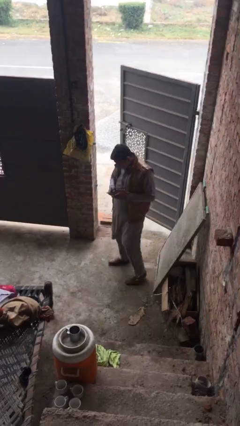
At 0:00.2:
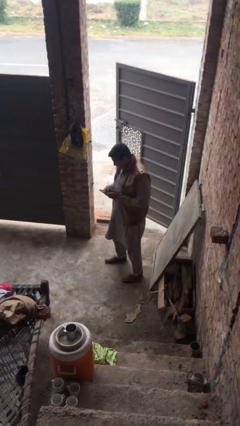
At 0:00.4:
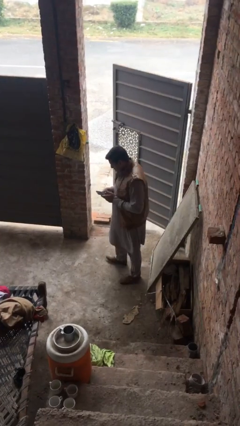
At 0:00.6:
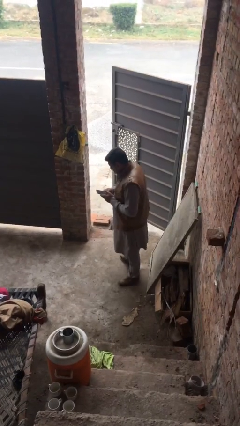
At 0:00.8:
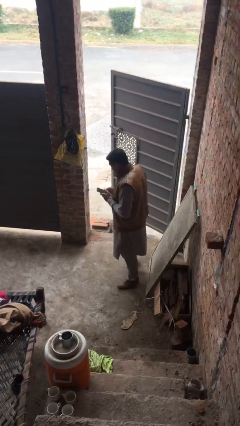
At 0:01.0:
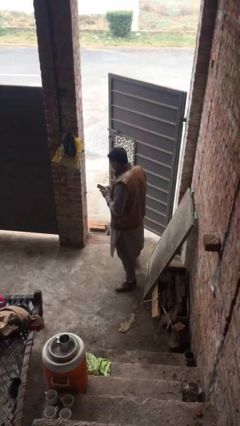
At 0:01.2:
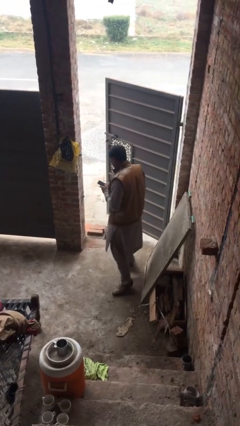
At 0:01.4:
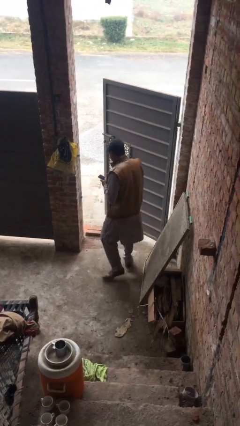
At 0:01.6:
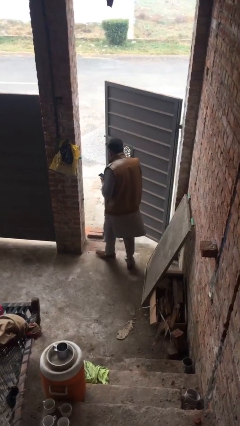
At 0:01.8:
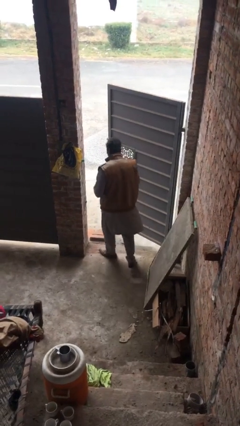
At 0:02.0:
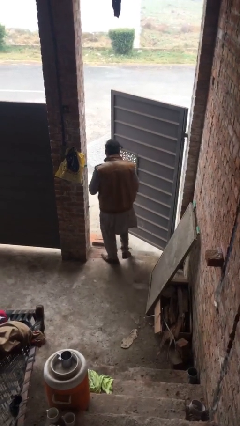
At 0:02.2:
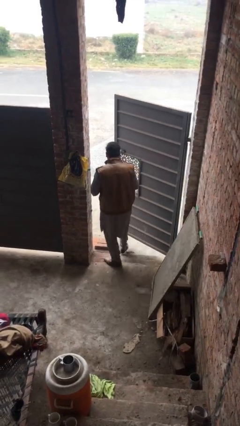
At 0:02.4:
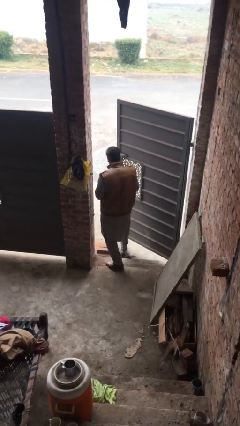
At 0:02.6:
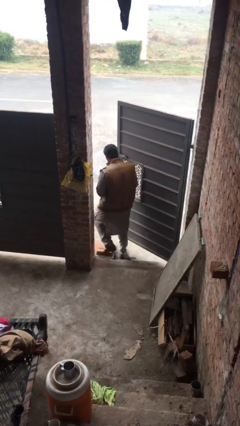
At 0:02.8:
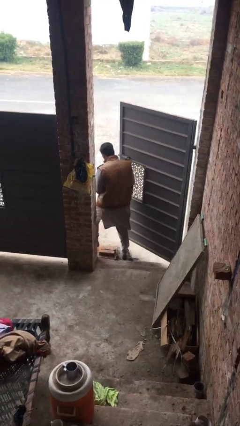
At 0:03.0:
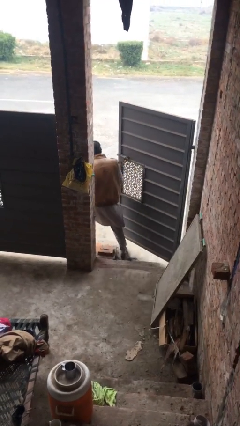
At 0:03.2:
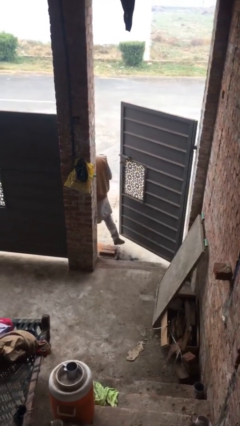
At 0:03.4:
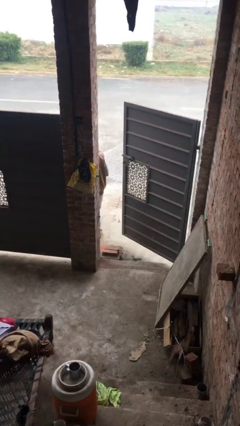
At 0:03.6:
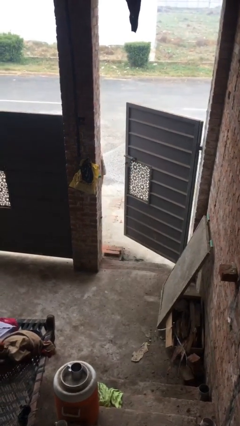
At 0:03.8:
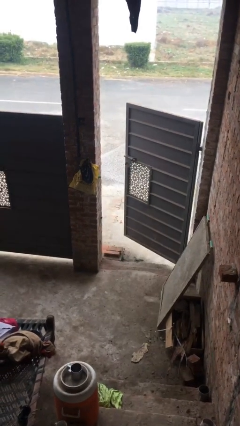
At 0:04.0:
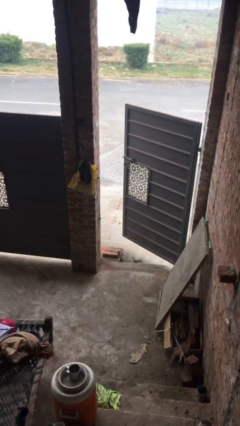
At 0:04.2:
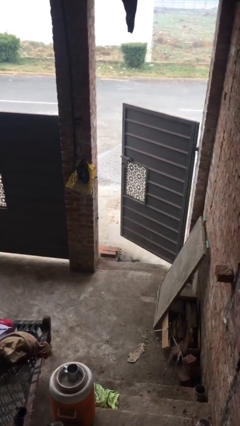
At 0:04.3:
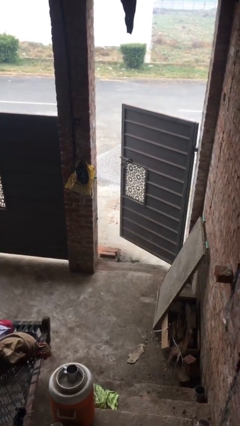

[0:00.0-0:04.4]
person exits scene through structure

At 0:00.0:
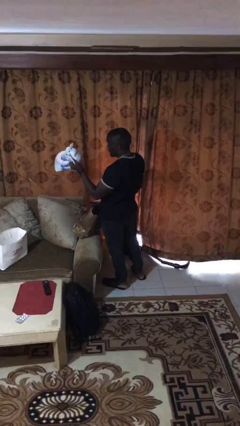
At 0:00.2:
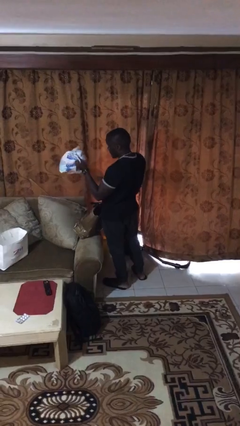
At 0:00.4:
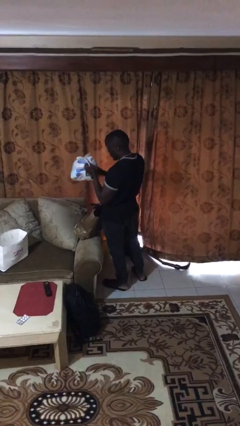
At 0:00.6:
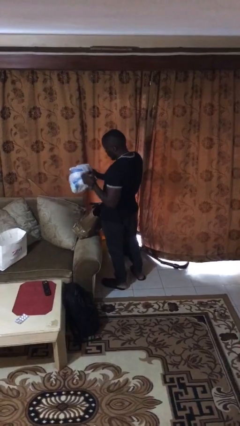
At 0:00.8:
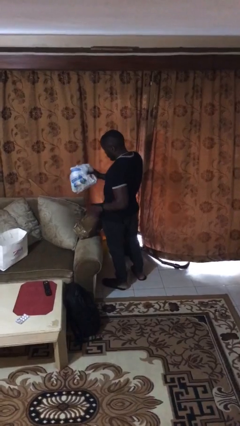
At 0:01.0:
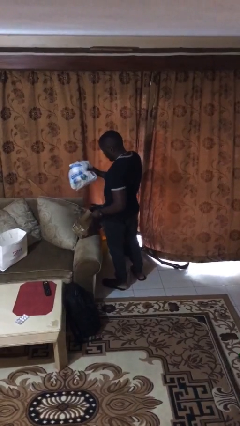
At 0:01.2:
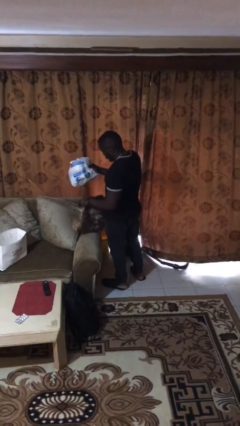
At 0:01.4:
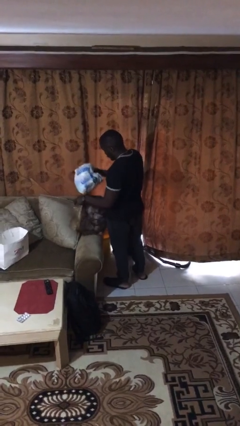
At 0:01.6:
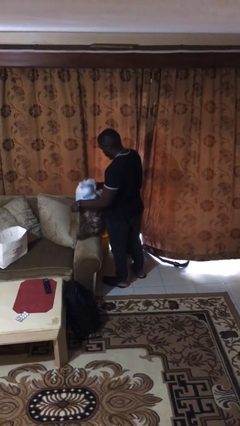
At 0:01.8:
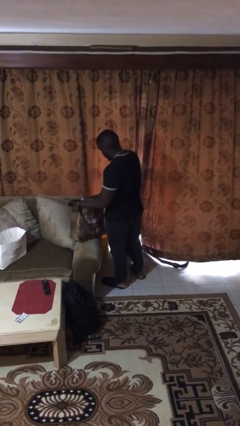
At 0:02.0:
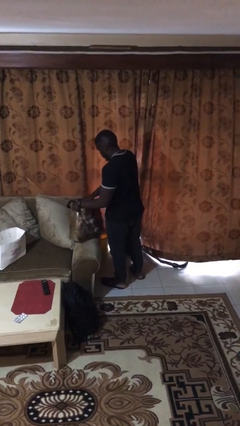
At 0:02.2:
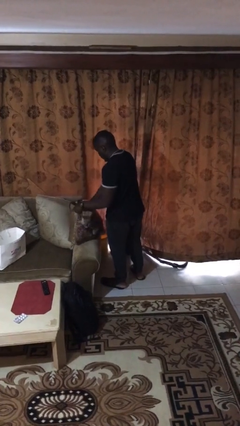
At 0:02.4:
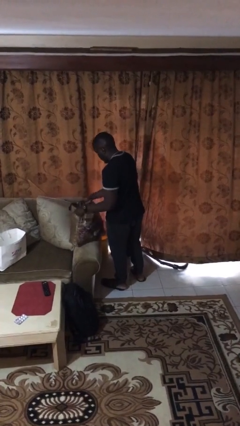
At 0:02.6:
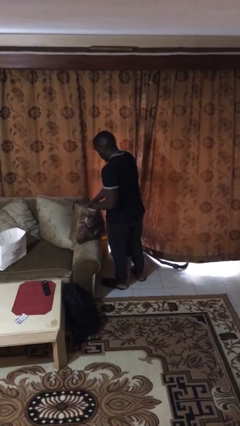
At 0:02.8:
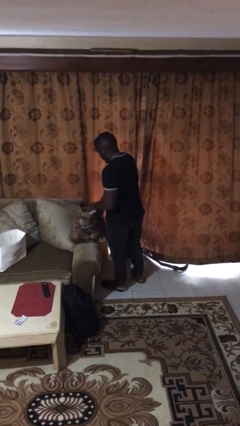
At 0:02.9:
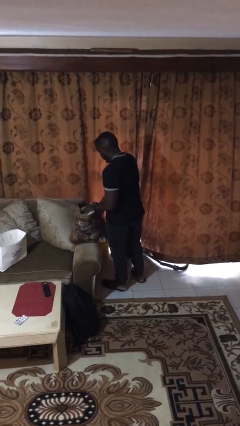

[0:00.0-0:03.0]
person puts object into bag

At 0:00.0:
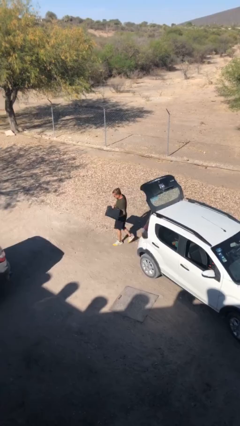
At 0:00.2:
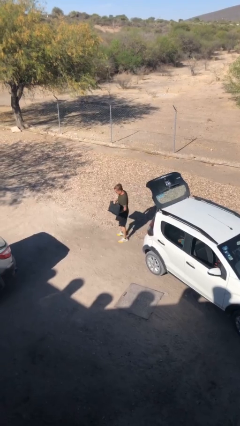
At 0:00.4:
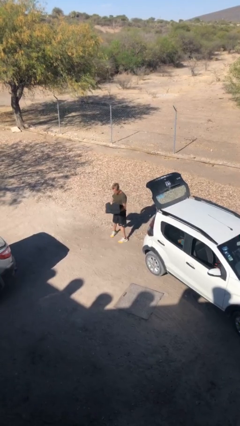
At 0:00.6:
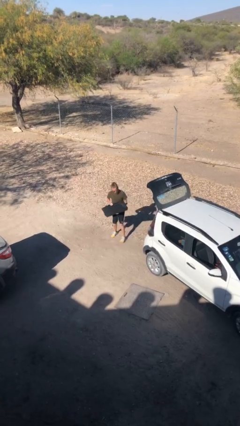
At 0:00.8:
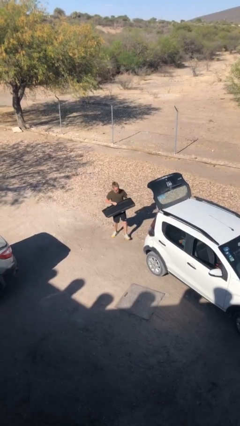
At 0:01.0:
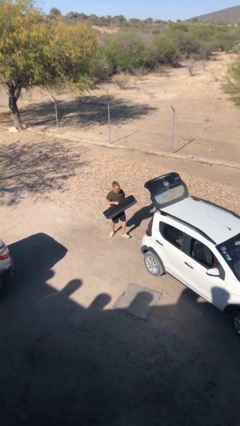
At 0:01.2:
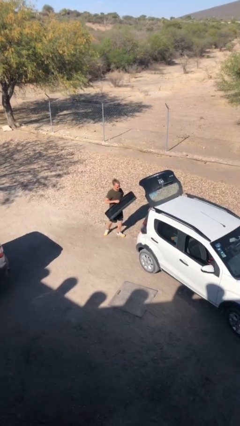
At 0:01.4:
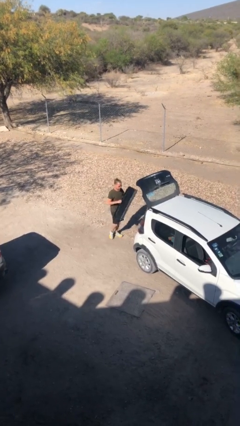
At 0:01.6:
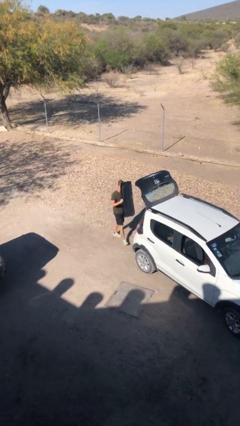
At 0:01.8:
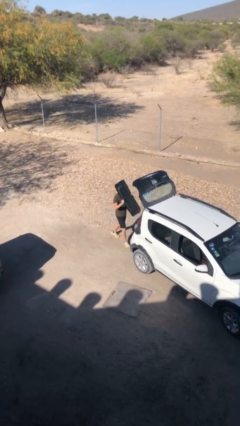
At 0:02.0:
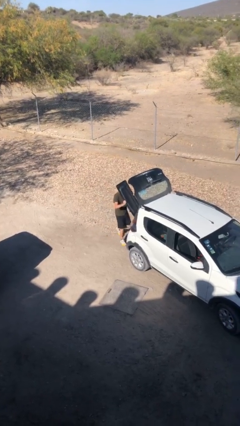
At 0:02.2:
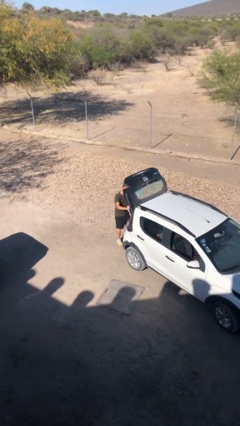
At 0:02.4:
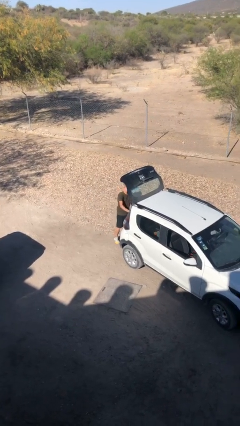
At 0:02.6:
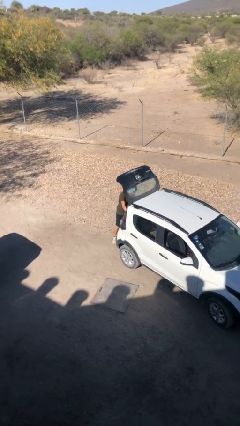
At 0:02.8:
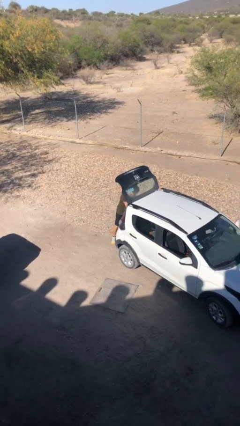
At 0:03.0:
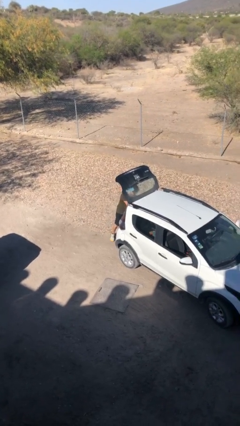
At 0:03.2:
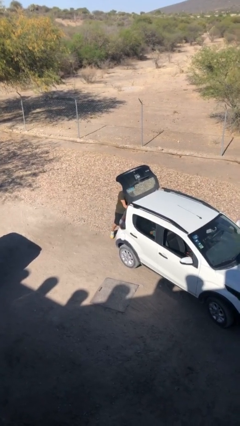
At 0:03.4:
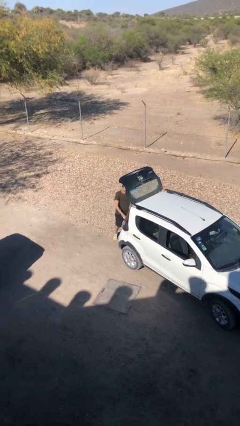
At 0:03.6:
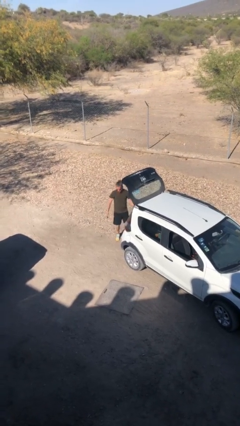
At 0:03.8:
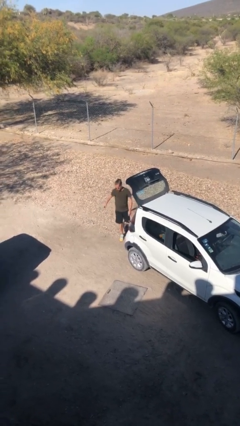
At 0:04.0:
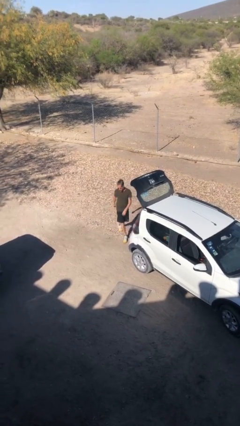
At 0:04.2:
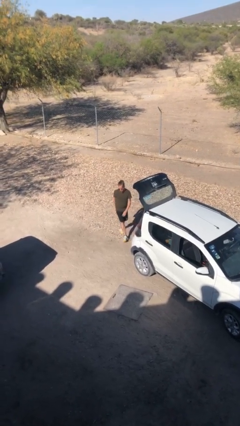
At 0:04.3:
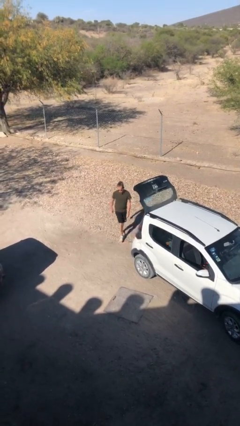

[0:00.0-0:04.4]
person loads car

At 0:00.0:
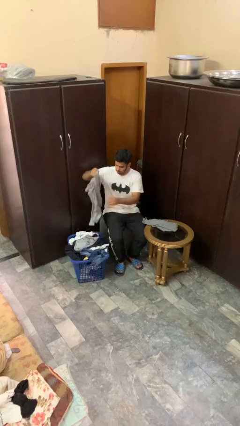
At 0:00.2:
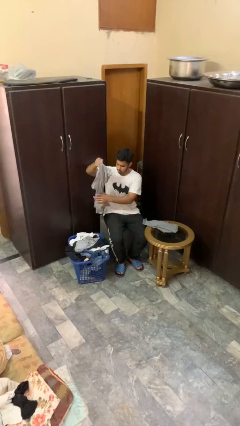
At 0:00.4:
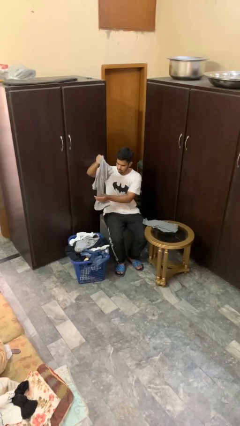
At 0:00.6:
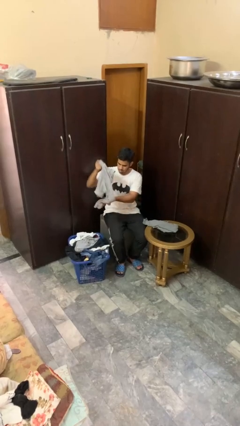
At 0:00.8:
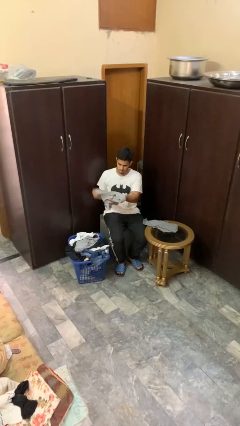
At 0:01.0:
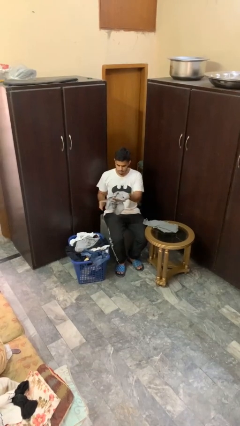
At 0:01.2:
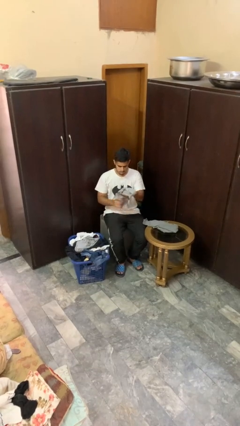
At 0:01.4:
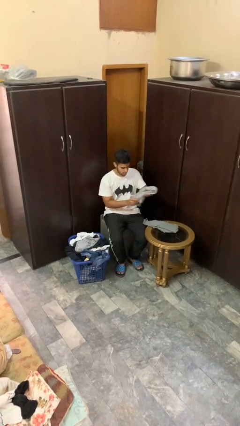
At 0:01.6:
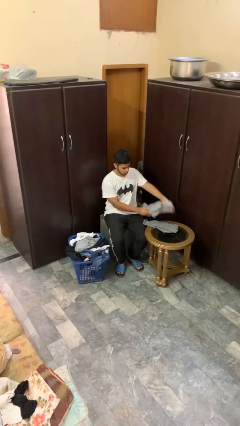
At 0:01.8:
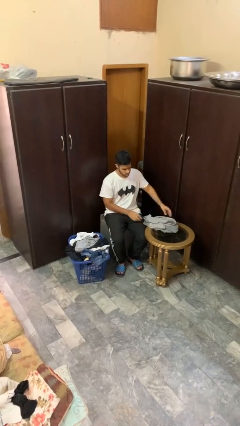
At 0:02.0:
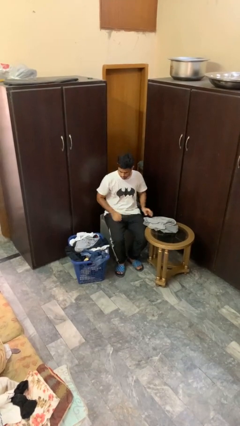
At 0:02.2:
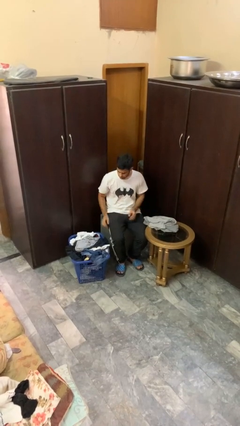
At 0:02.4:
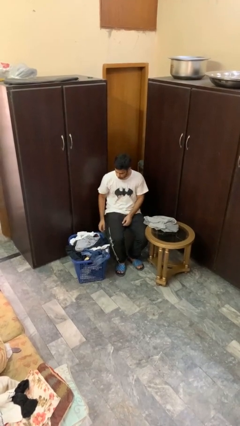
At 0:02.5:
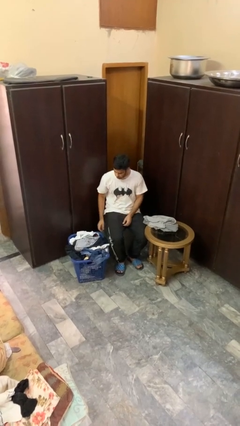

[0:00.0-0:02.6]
person folds shirt

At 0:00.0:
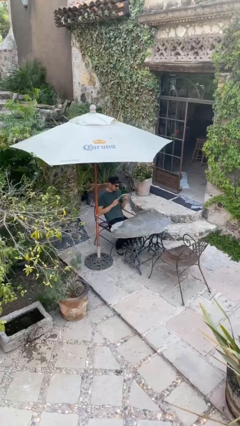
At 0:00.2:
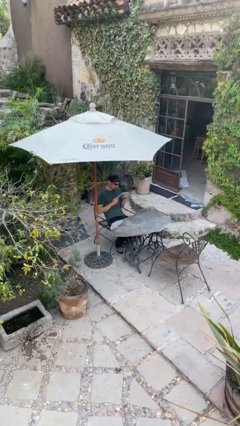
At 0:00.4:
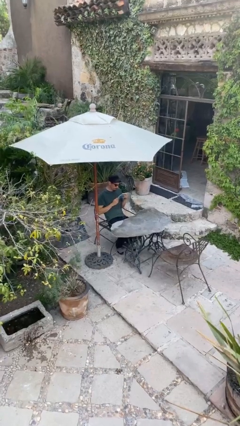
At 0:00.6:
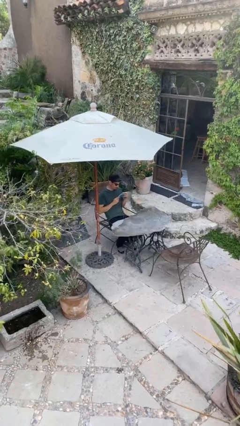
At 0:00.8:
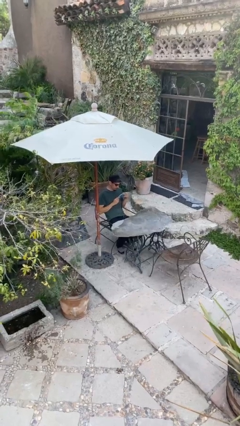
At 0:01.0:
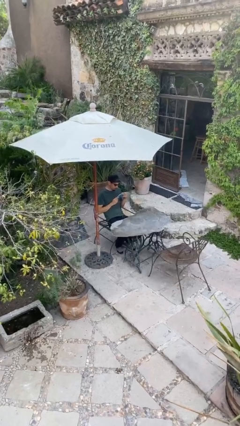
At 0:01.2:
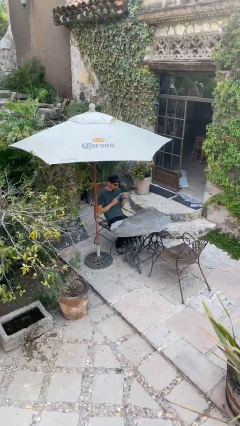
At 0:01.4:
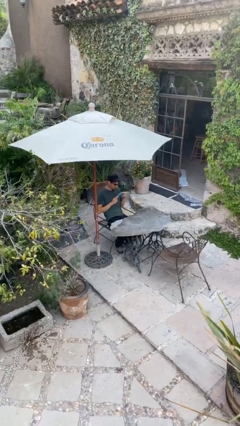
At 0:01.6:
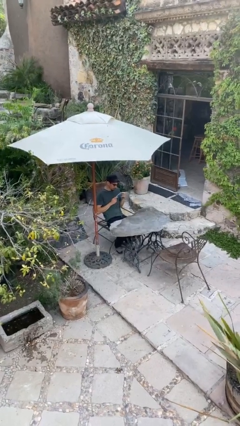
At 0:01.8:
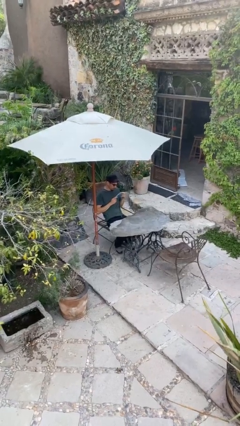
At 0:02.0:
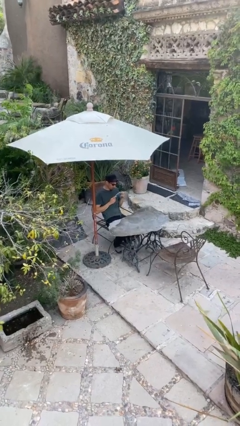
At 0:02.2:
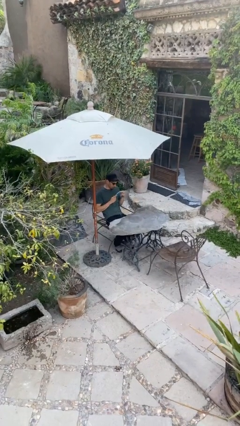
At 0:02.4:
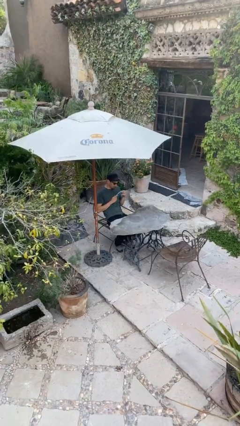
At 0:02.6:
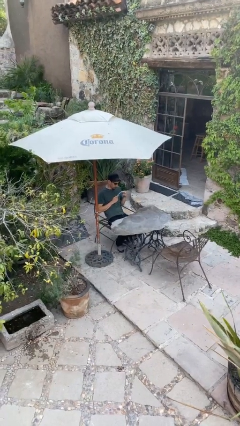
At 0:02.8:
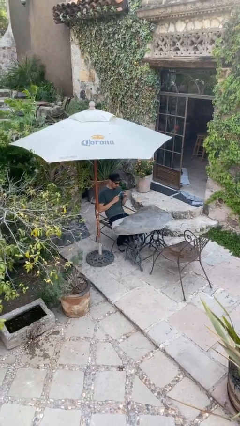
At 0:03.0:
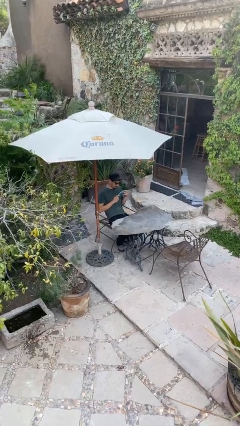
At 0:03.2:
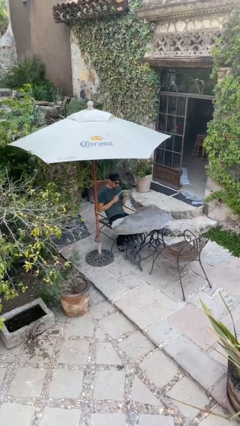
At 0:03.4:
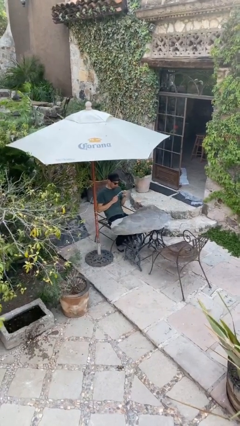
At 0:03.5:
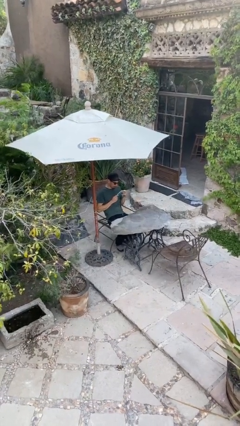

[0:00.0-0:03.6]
person reads document
